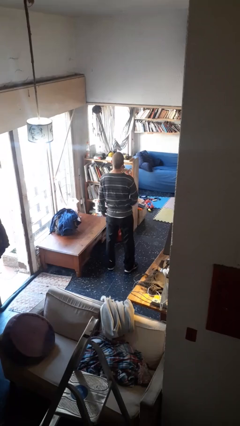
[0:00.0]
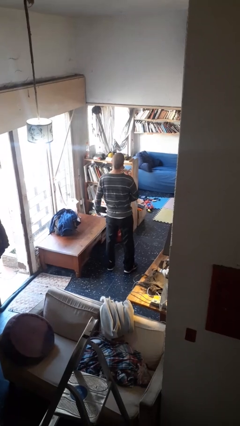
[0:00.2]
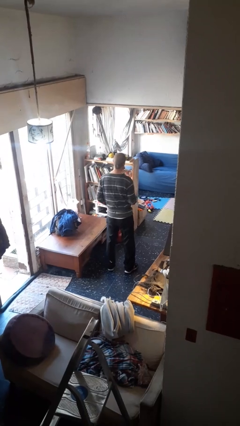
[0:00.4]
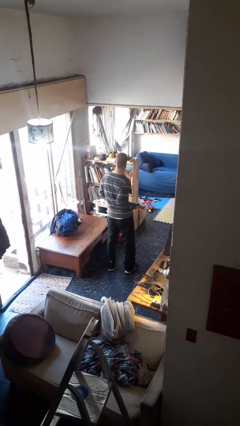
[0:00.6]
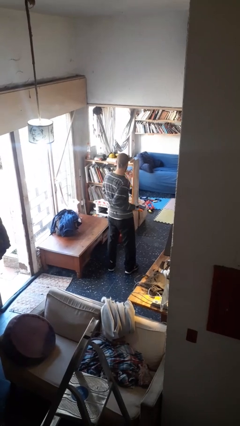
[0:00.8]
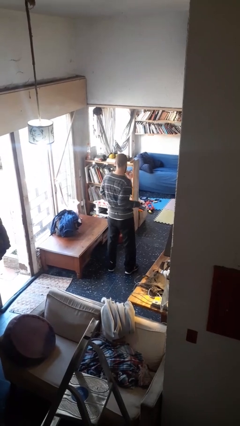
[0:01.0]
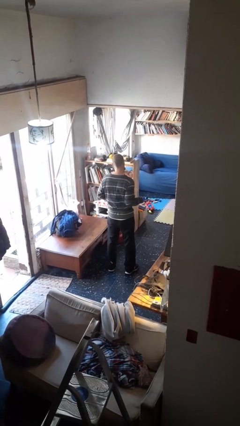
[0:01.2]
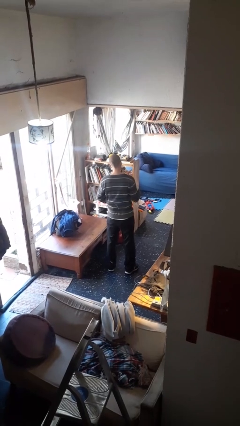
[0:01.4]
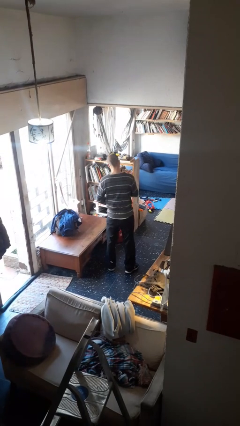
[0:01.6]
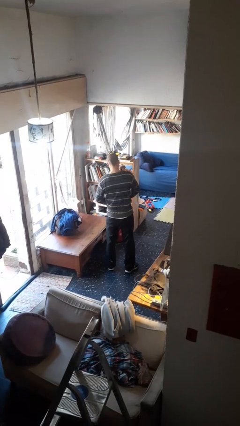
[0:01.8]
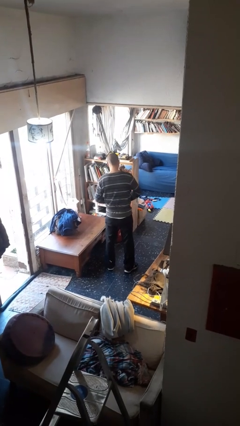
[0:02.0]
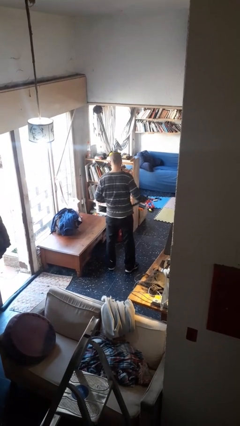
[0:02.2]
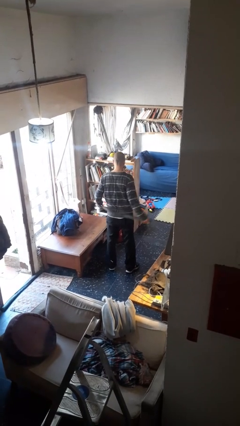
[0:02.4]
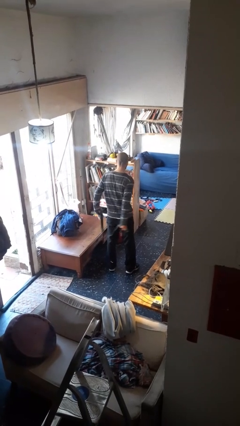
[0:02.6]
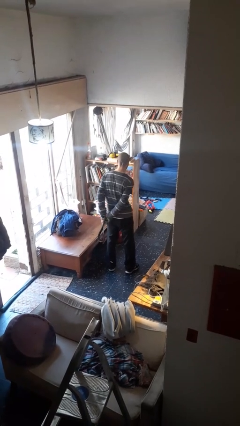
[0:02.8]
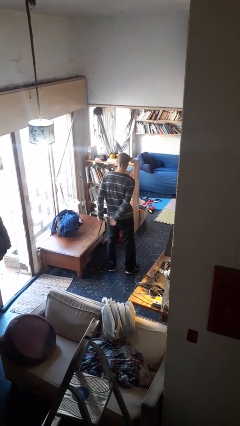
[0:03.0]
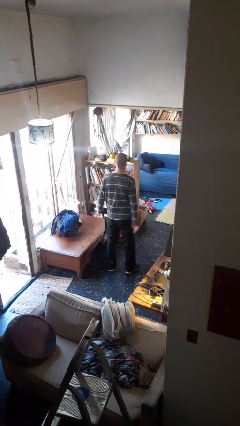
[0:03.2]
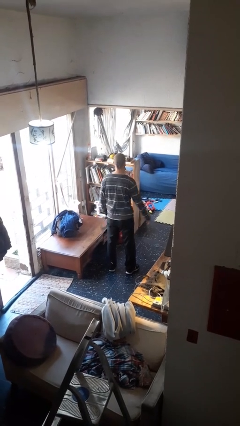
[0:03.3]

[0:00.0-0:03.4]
person takes off belt

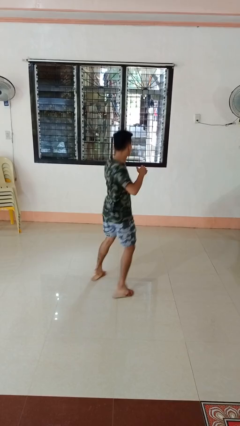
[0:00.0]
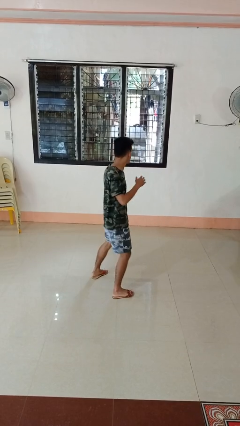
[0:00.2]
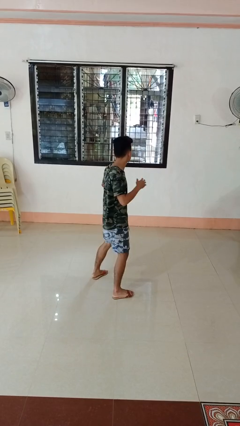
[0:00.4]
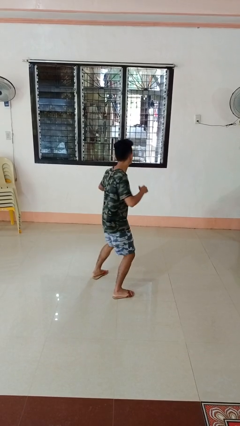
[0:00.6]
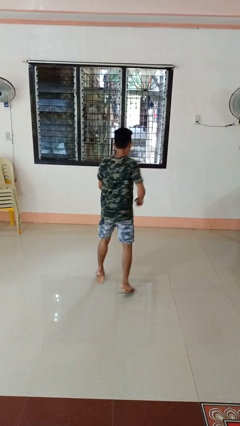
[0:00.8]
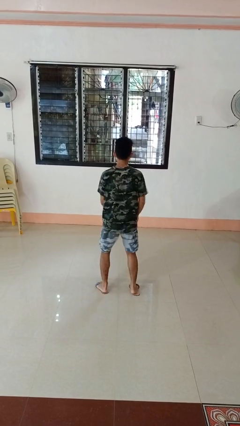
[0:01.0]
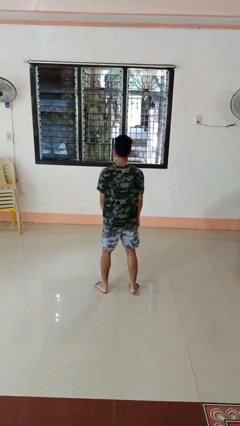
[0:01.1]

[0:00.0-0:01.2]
person karate chop

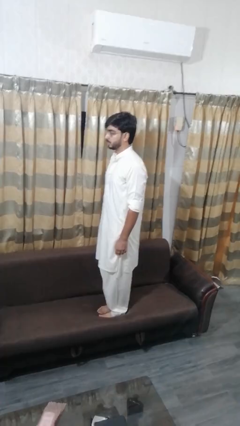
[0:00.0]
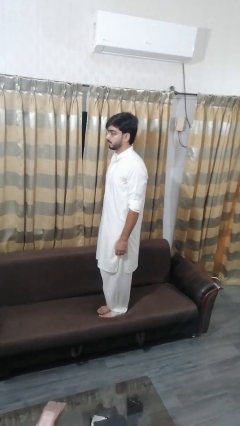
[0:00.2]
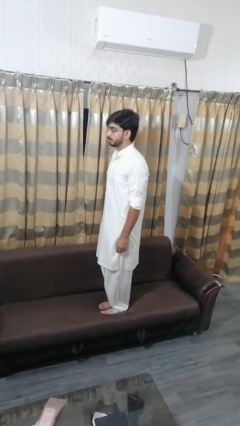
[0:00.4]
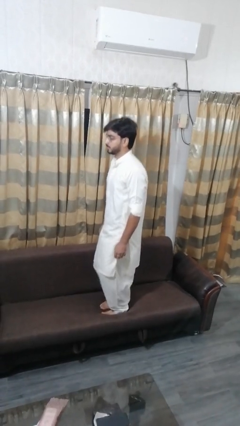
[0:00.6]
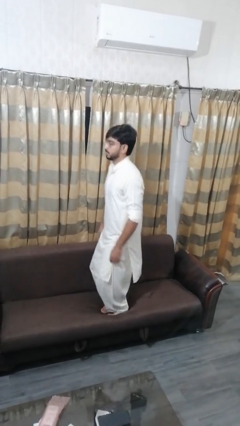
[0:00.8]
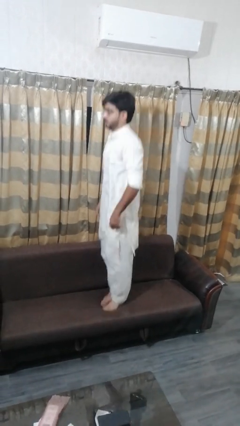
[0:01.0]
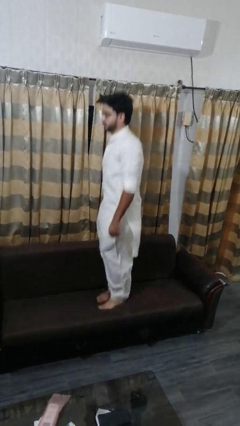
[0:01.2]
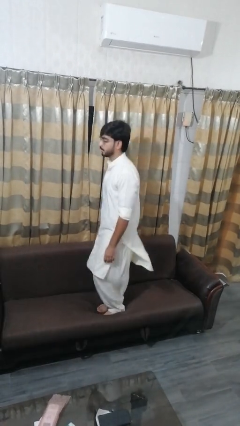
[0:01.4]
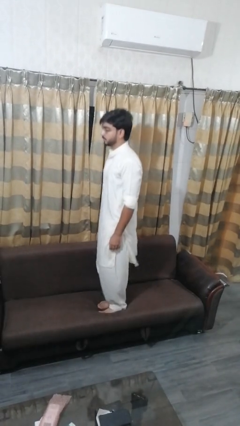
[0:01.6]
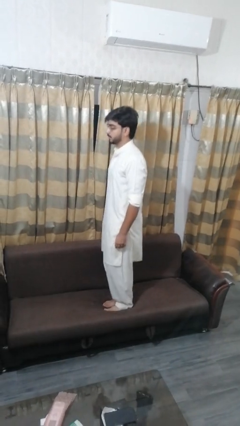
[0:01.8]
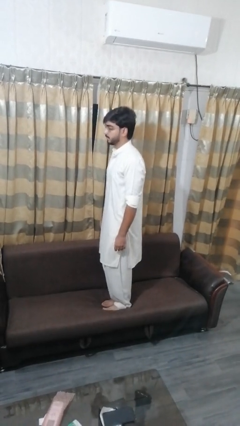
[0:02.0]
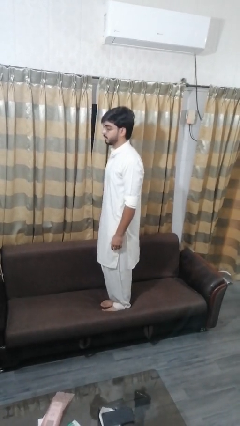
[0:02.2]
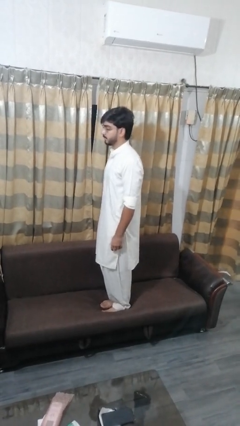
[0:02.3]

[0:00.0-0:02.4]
person jumps on couch

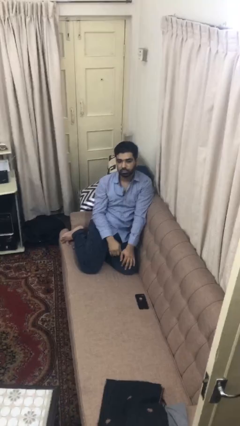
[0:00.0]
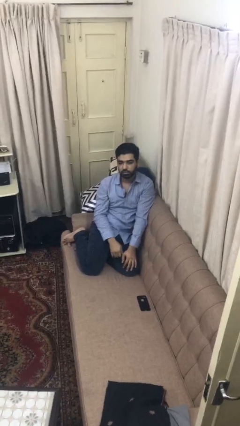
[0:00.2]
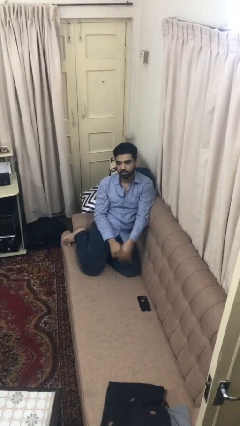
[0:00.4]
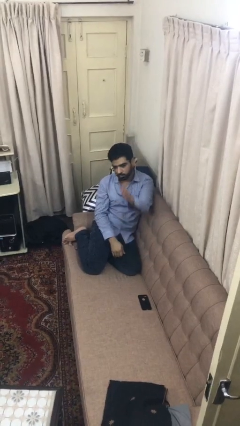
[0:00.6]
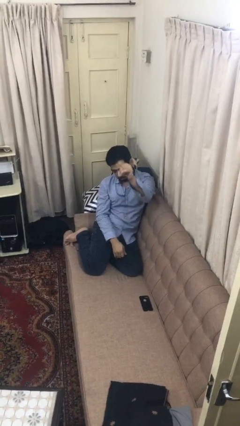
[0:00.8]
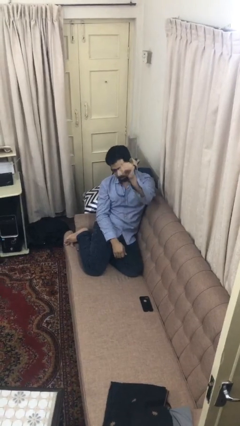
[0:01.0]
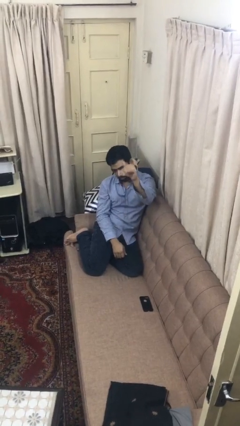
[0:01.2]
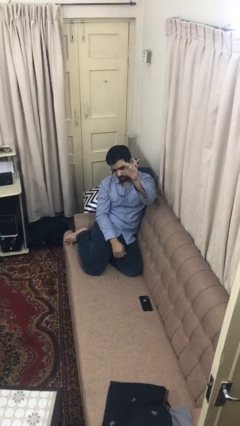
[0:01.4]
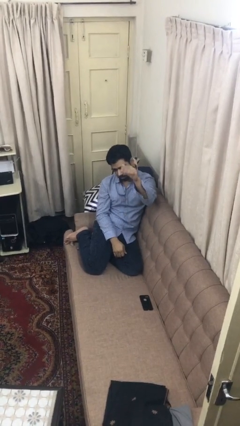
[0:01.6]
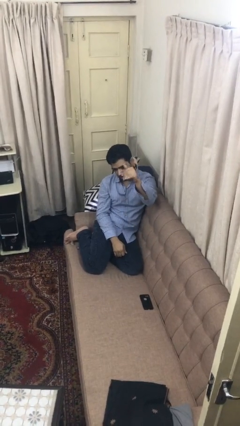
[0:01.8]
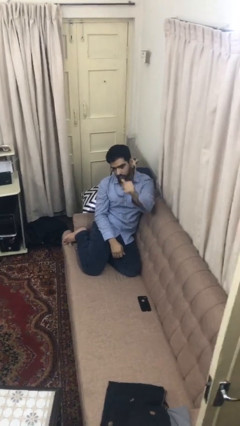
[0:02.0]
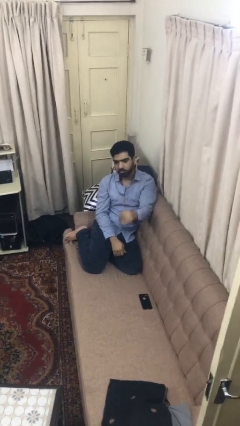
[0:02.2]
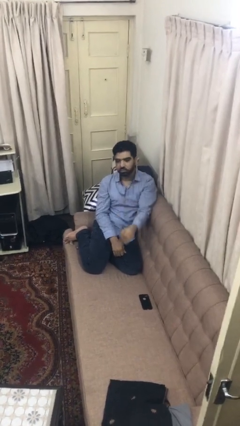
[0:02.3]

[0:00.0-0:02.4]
person gestures come here

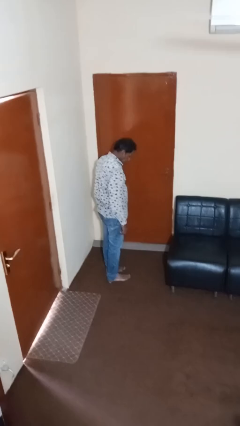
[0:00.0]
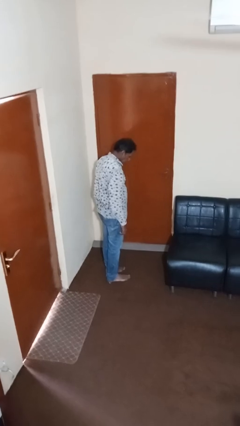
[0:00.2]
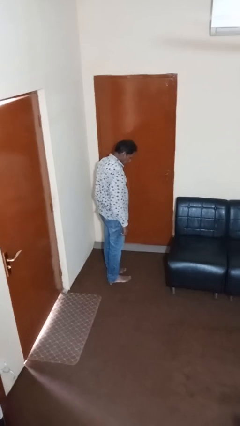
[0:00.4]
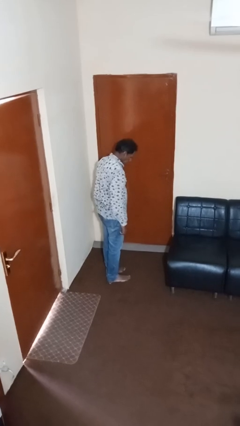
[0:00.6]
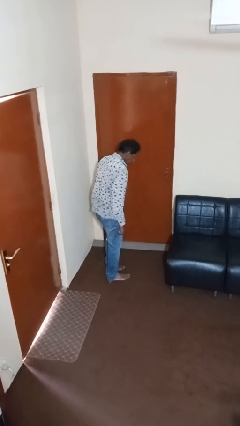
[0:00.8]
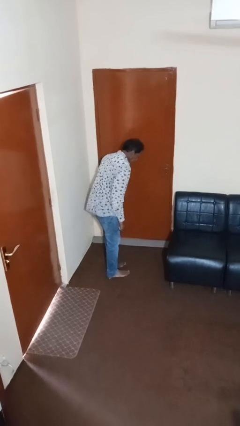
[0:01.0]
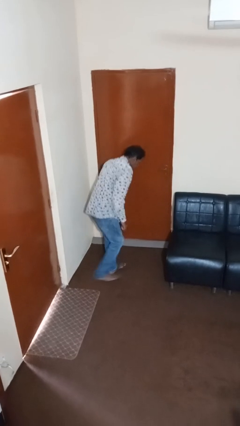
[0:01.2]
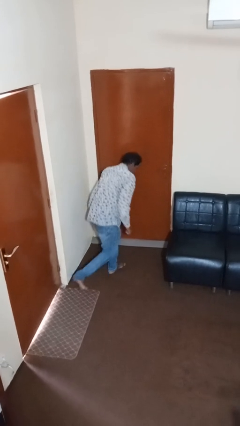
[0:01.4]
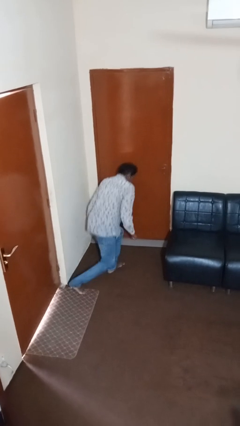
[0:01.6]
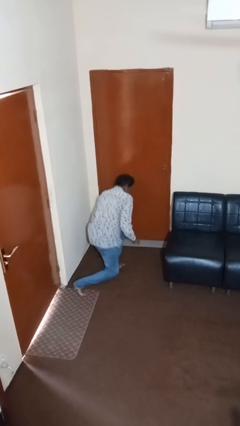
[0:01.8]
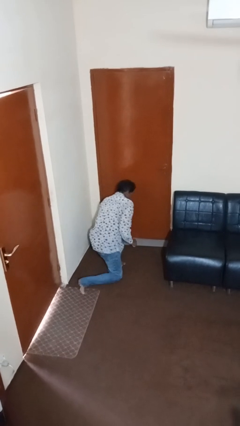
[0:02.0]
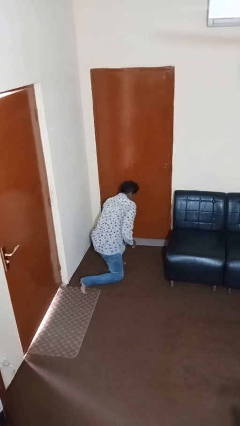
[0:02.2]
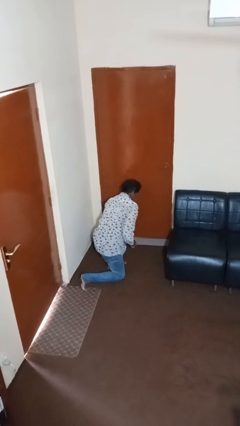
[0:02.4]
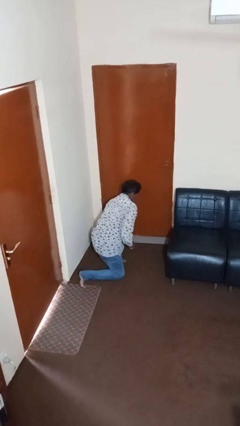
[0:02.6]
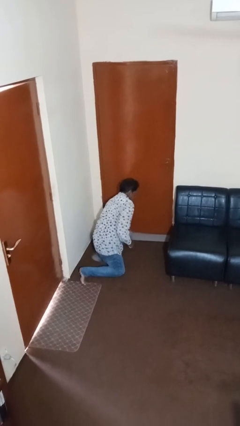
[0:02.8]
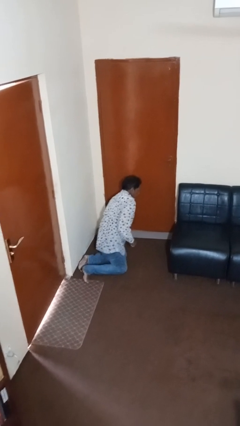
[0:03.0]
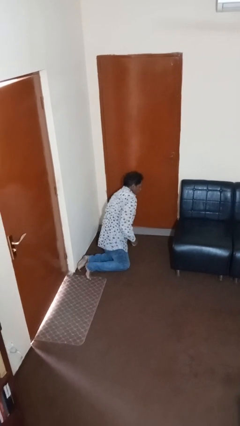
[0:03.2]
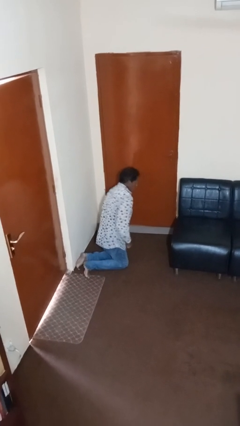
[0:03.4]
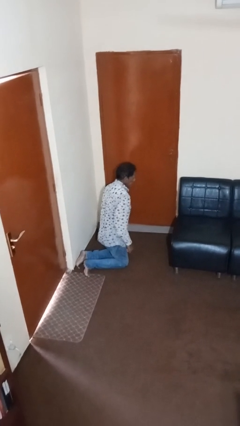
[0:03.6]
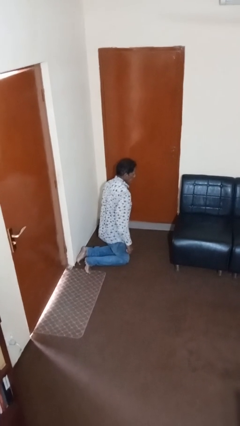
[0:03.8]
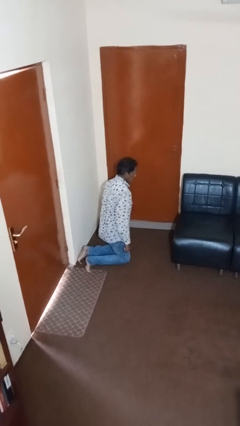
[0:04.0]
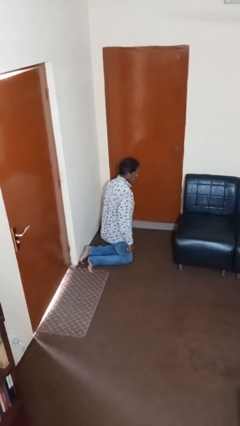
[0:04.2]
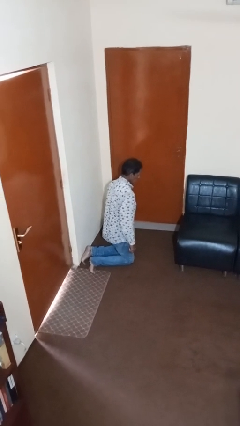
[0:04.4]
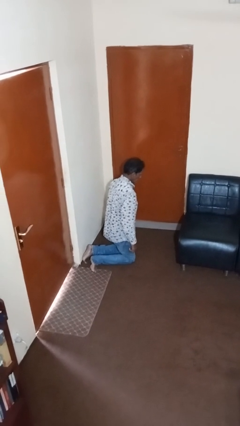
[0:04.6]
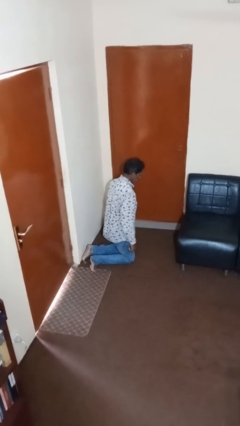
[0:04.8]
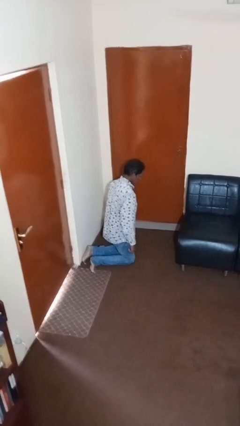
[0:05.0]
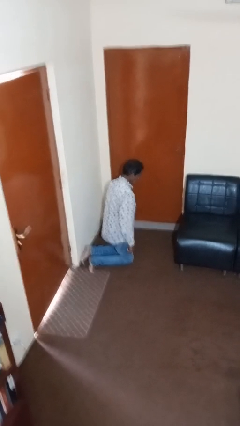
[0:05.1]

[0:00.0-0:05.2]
person squats

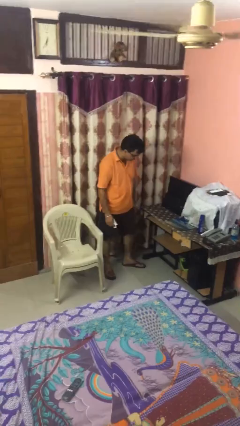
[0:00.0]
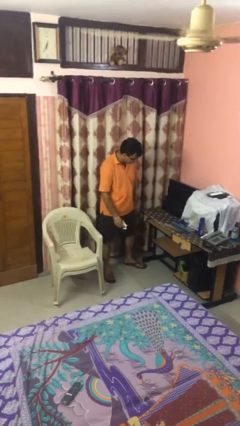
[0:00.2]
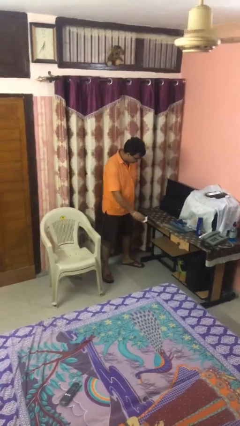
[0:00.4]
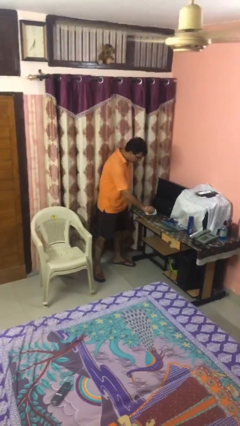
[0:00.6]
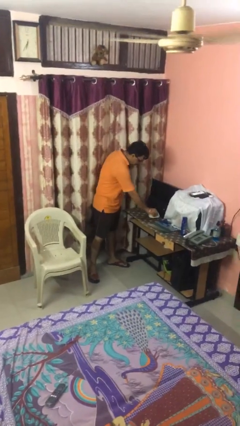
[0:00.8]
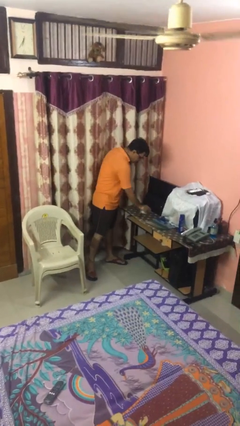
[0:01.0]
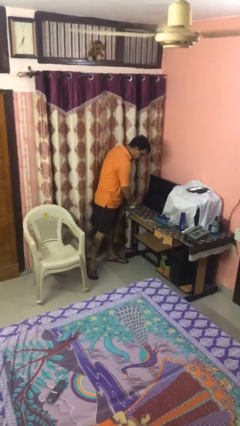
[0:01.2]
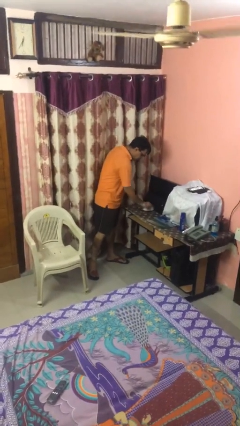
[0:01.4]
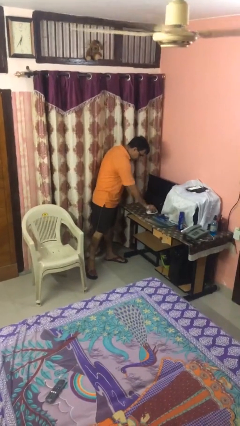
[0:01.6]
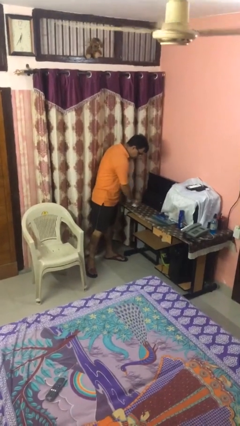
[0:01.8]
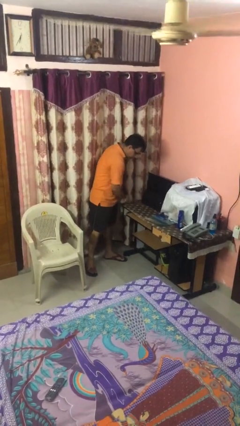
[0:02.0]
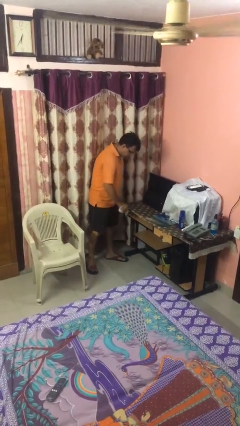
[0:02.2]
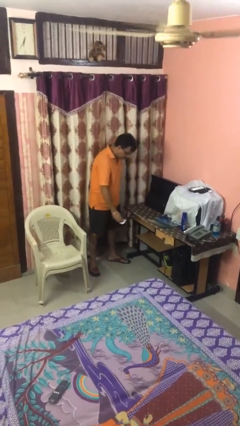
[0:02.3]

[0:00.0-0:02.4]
person cleans table with rag

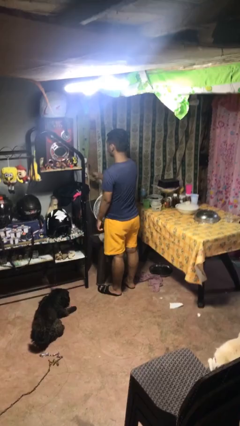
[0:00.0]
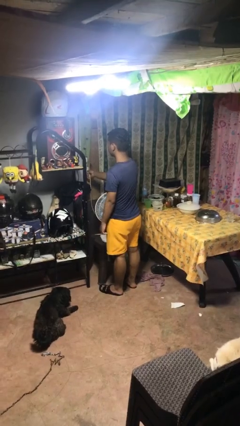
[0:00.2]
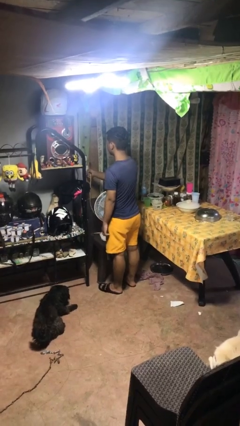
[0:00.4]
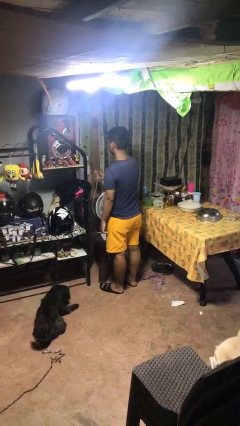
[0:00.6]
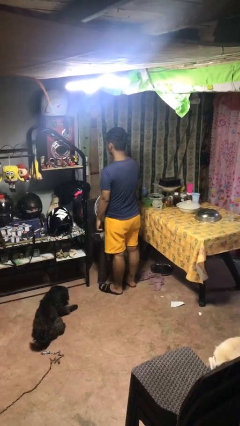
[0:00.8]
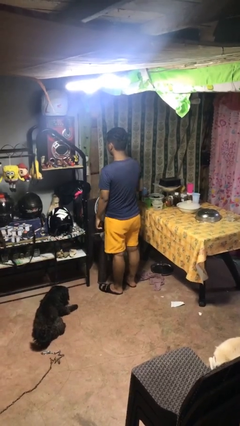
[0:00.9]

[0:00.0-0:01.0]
person unplugs from electrical socket
